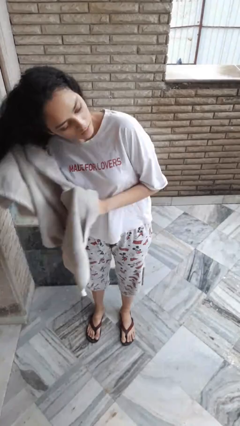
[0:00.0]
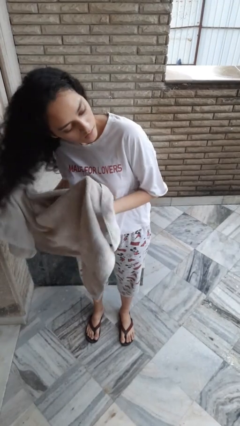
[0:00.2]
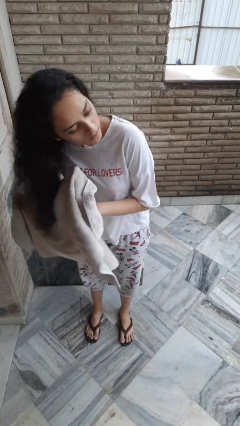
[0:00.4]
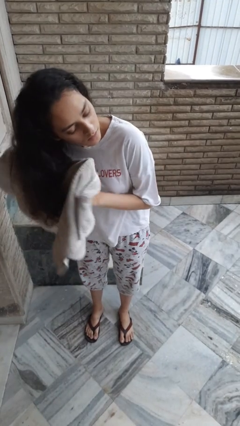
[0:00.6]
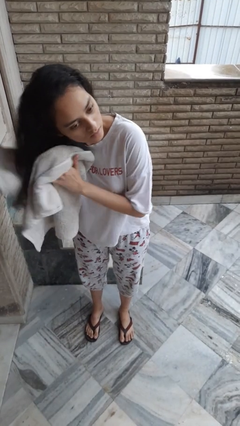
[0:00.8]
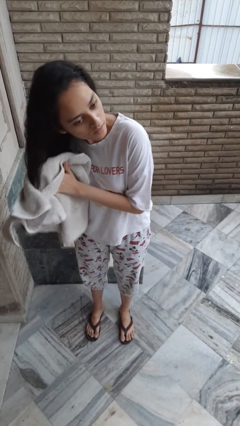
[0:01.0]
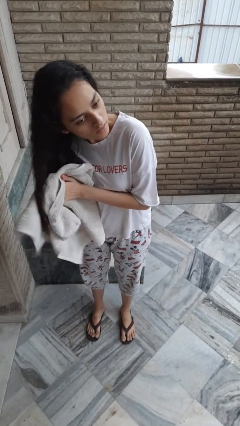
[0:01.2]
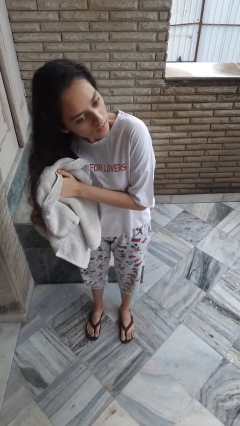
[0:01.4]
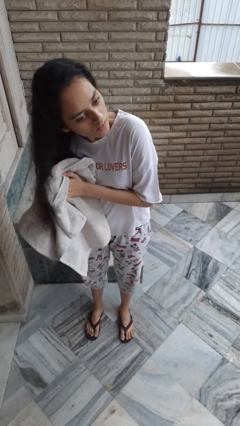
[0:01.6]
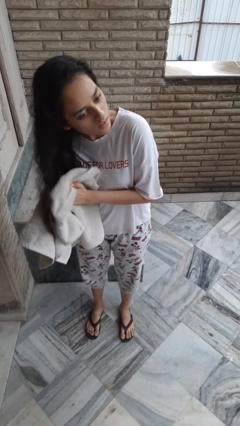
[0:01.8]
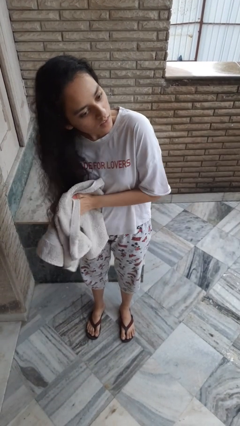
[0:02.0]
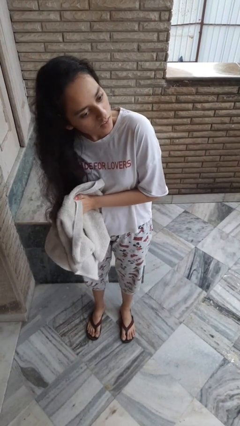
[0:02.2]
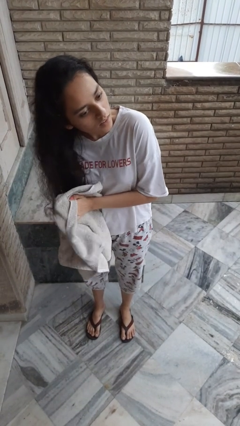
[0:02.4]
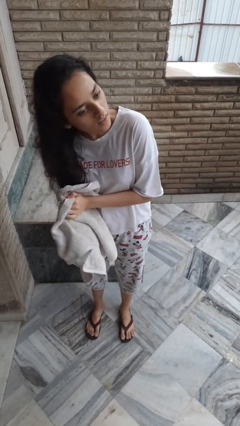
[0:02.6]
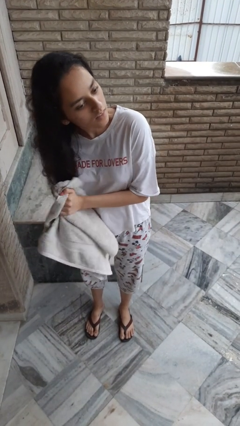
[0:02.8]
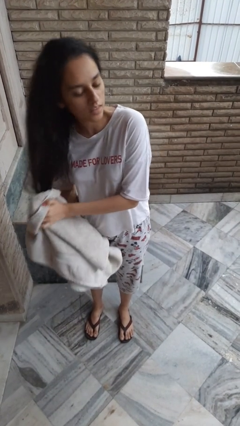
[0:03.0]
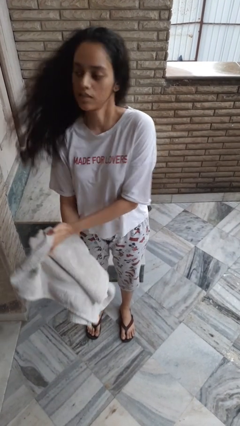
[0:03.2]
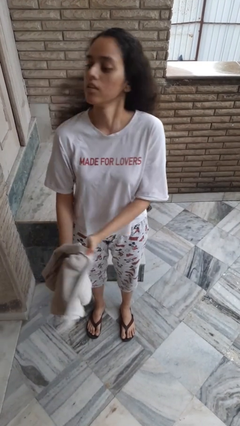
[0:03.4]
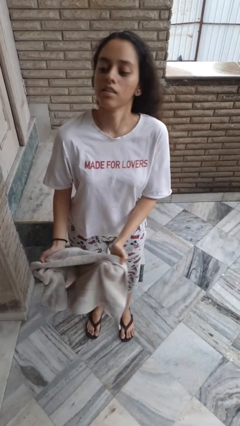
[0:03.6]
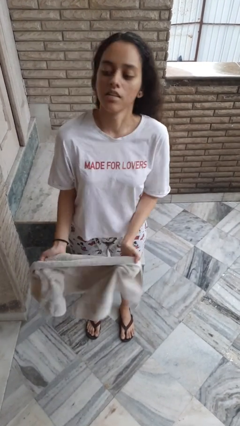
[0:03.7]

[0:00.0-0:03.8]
person dries hair with towel

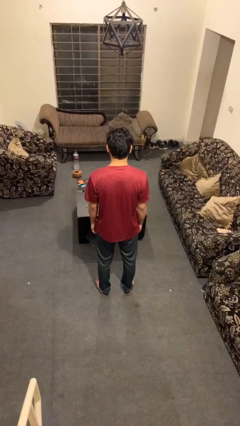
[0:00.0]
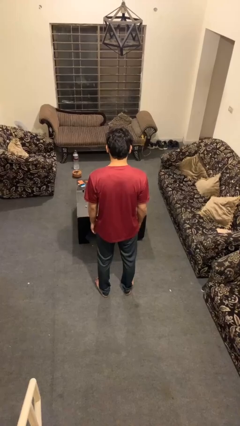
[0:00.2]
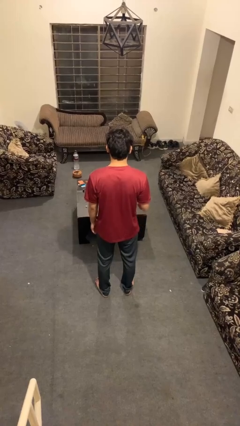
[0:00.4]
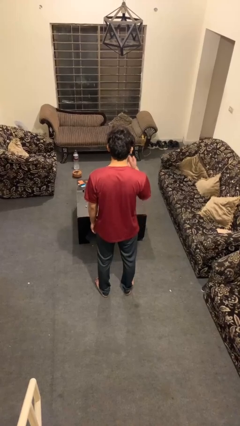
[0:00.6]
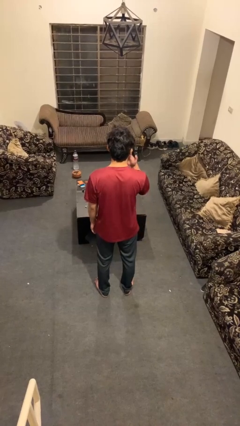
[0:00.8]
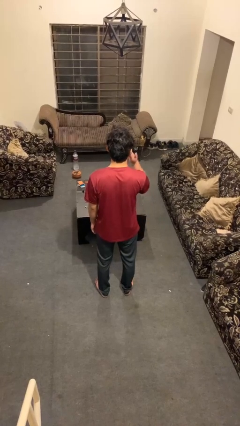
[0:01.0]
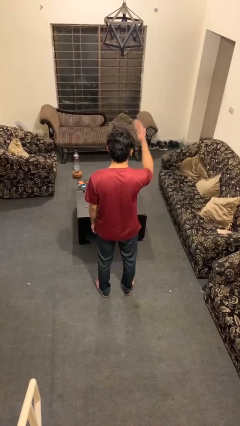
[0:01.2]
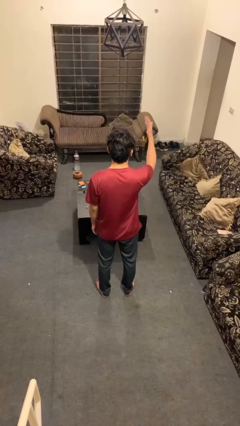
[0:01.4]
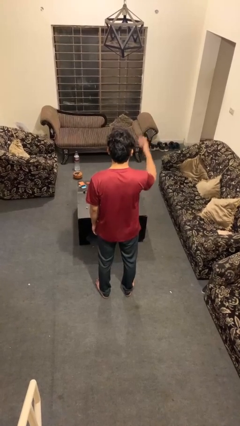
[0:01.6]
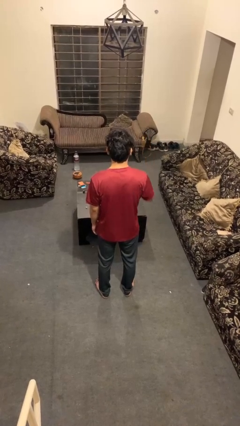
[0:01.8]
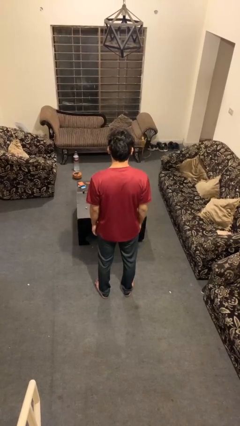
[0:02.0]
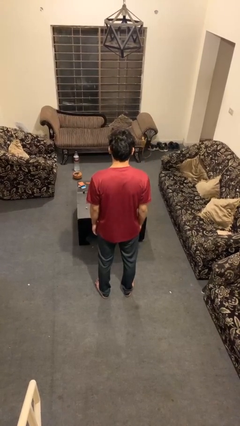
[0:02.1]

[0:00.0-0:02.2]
person gestures blow kiss

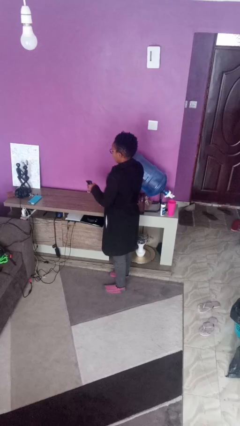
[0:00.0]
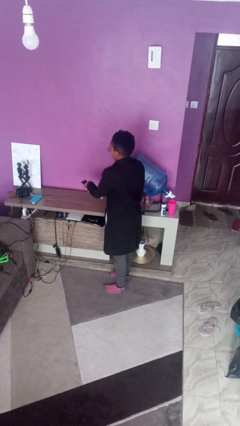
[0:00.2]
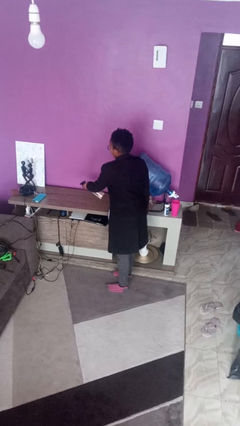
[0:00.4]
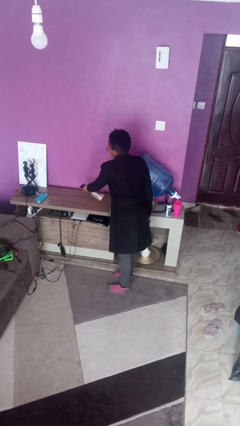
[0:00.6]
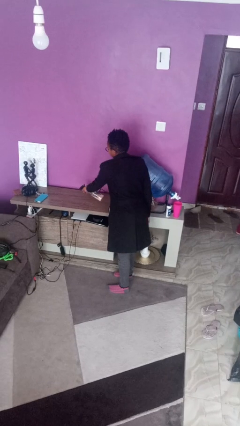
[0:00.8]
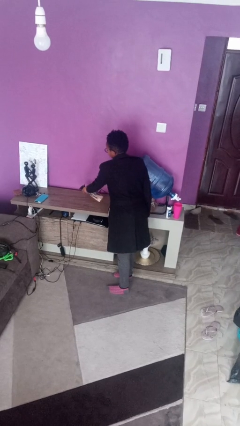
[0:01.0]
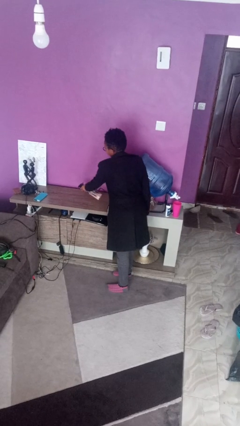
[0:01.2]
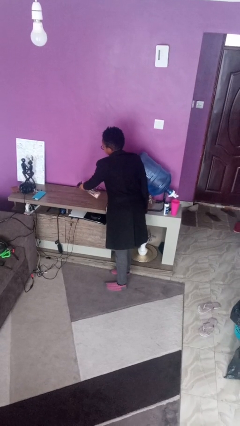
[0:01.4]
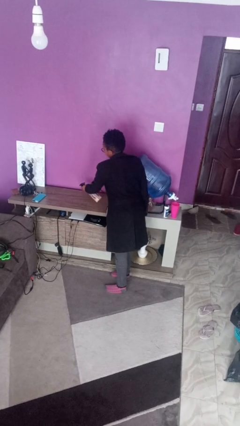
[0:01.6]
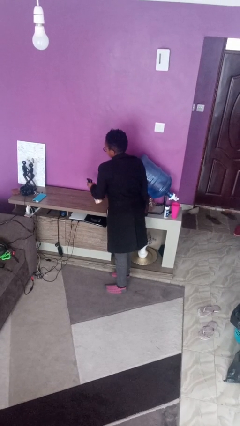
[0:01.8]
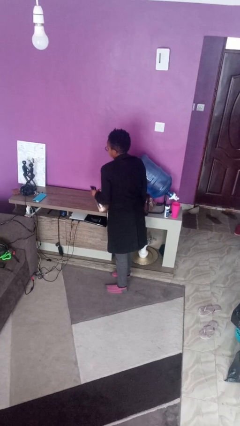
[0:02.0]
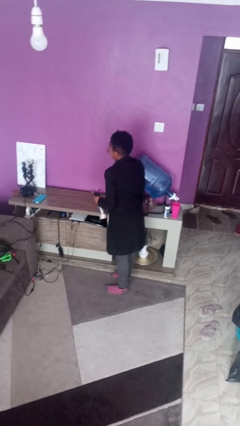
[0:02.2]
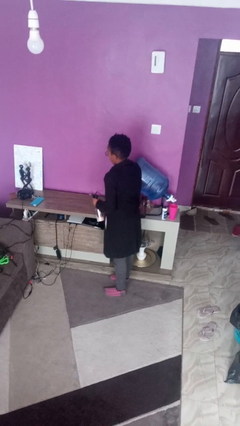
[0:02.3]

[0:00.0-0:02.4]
person sprays from bottle

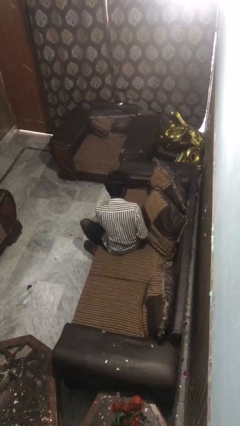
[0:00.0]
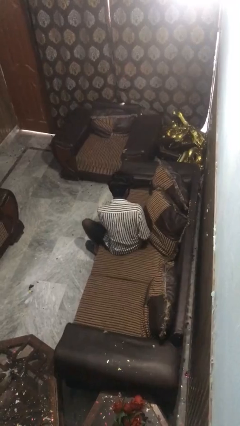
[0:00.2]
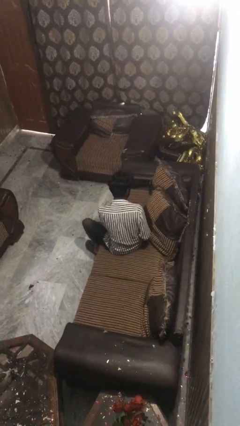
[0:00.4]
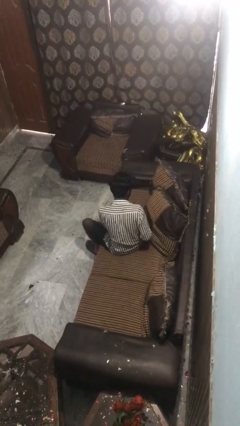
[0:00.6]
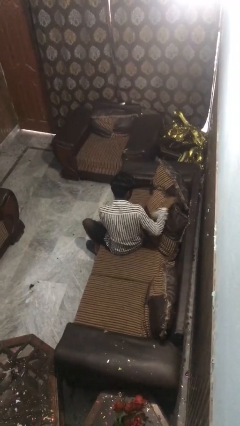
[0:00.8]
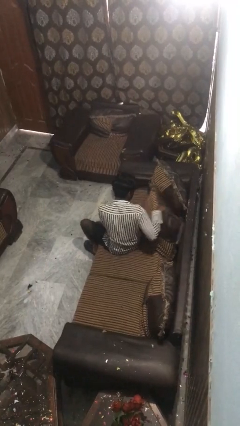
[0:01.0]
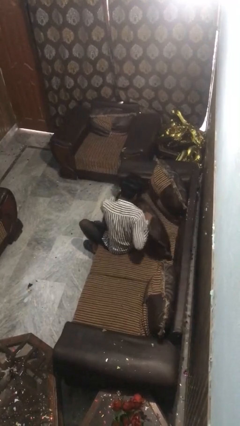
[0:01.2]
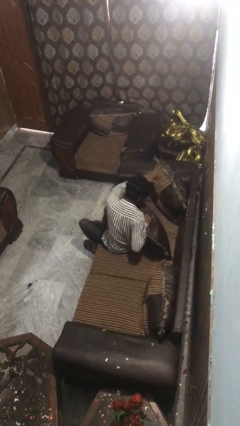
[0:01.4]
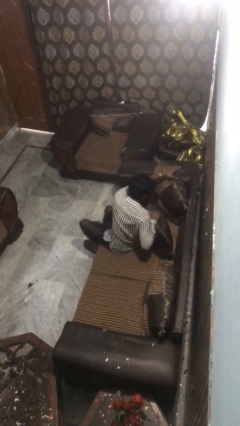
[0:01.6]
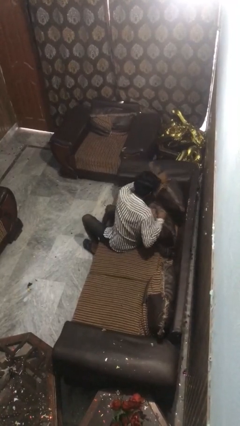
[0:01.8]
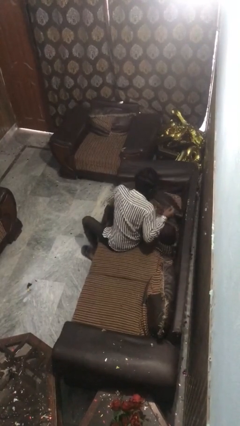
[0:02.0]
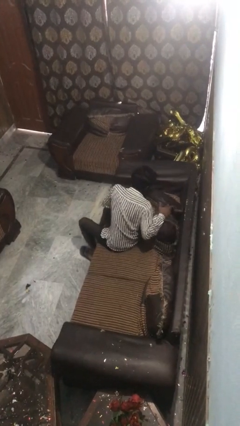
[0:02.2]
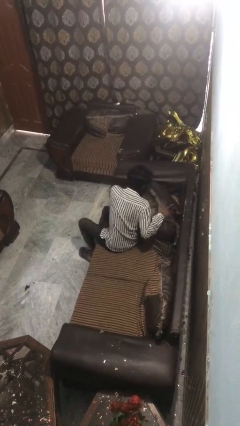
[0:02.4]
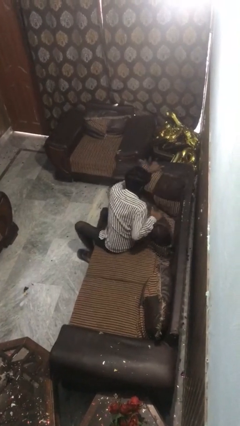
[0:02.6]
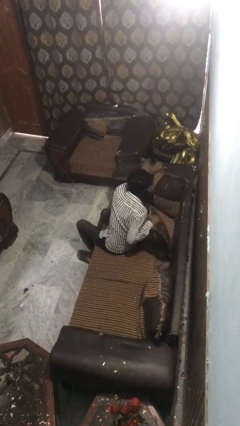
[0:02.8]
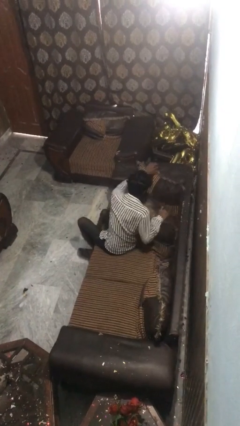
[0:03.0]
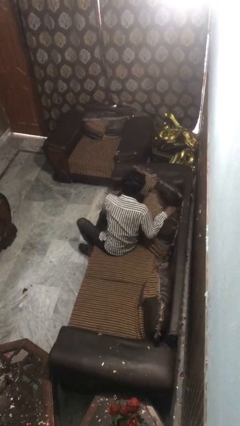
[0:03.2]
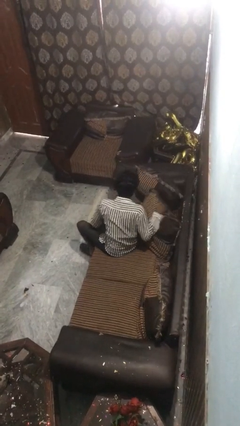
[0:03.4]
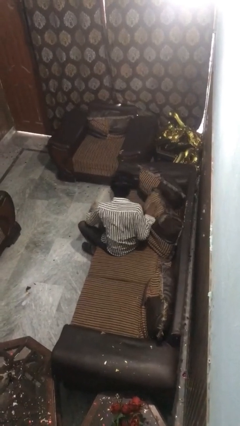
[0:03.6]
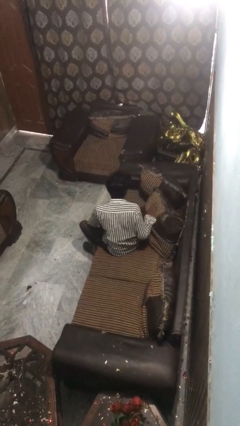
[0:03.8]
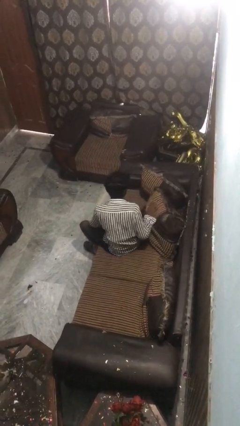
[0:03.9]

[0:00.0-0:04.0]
person searches in couch

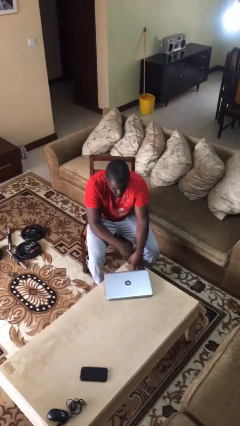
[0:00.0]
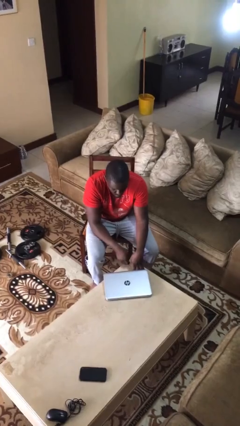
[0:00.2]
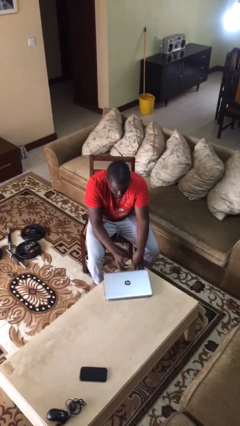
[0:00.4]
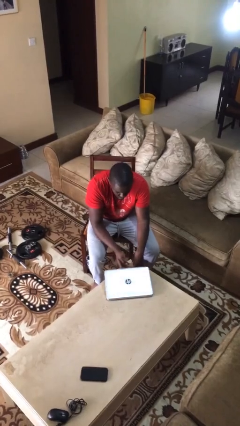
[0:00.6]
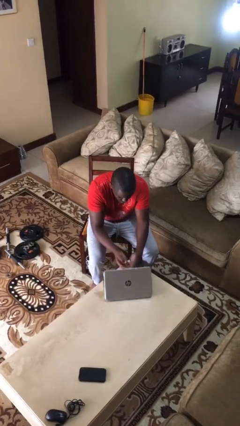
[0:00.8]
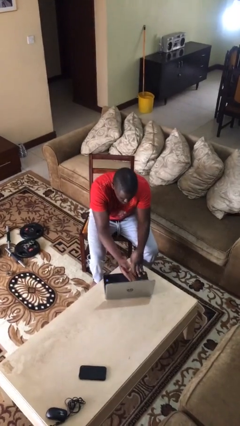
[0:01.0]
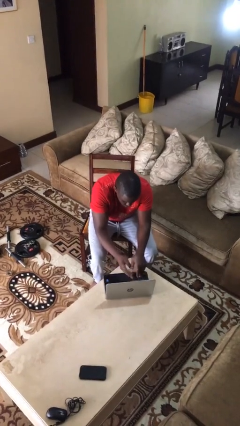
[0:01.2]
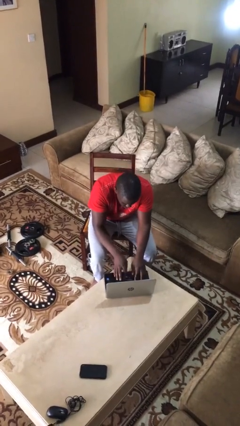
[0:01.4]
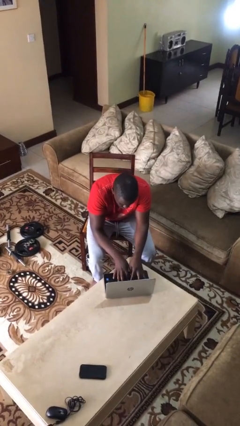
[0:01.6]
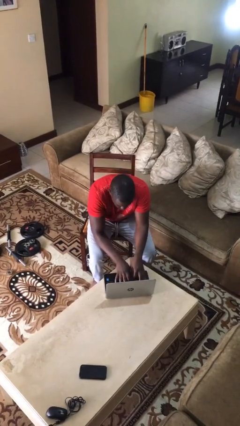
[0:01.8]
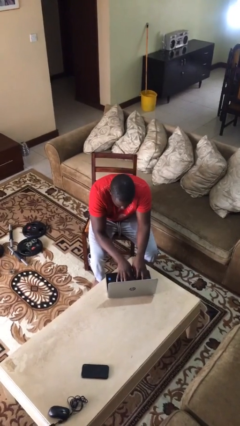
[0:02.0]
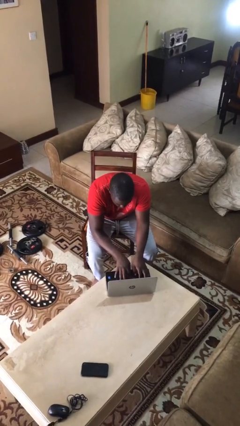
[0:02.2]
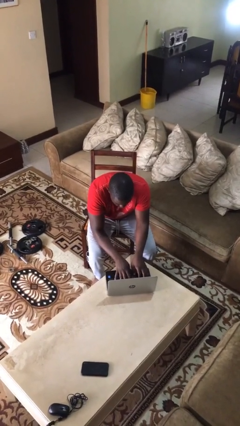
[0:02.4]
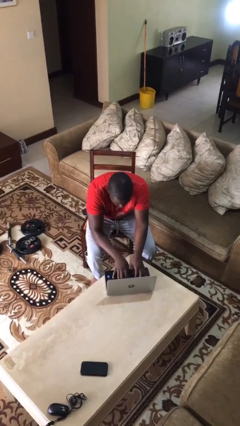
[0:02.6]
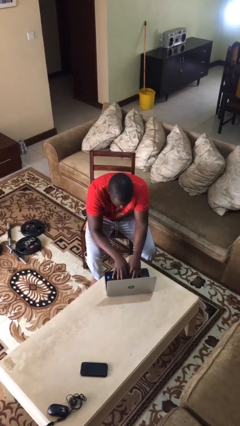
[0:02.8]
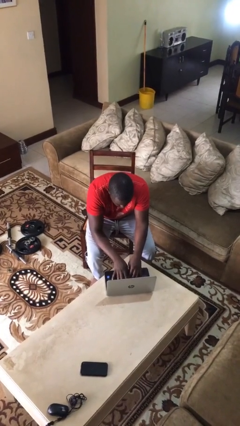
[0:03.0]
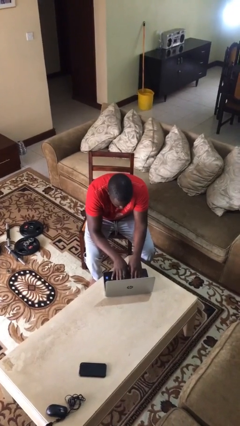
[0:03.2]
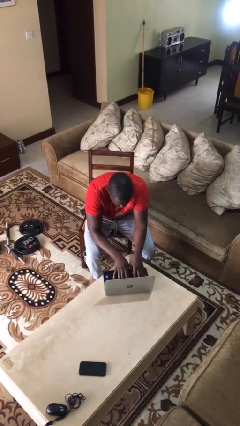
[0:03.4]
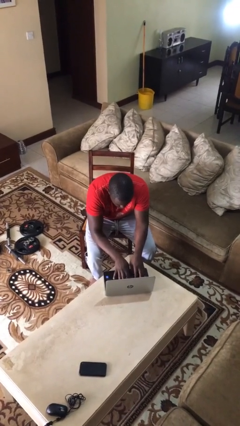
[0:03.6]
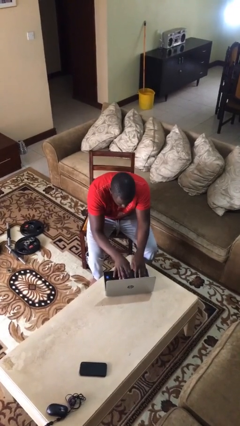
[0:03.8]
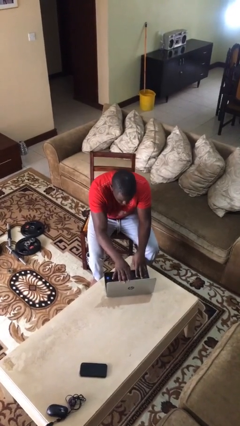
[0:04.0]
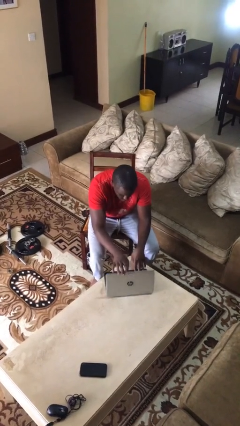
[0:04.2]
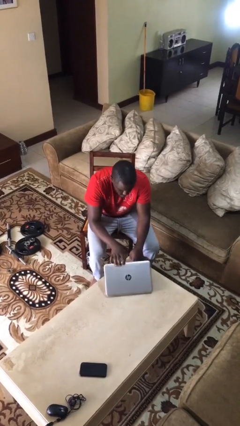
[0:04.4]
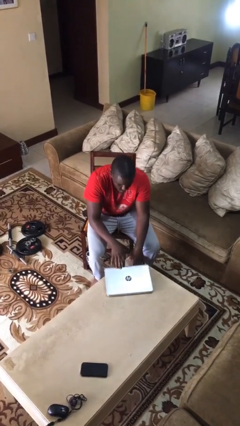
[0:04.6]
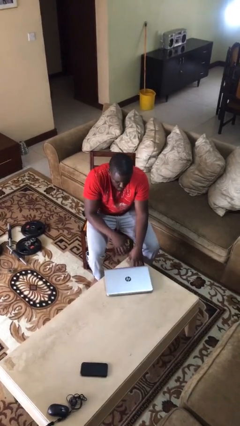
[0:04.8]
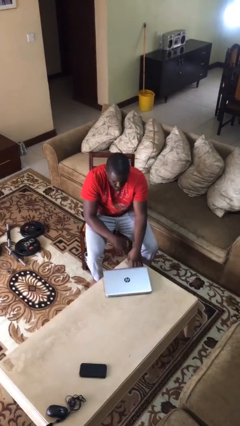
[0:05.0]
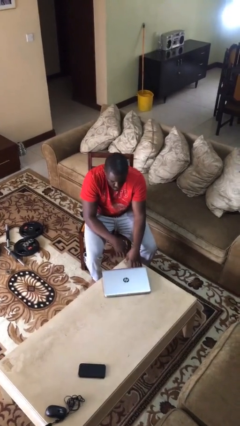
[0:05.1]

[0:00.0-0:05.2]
person interacts with laptop
